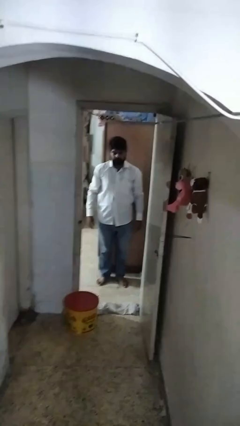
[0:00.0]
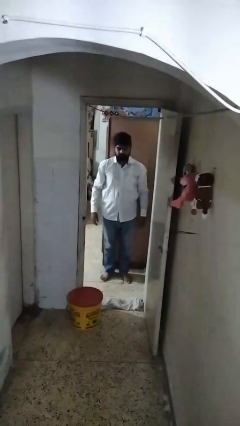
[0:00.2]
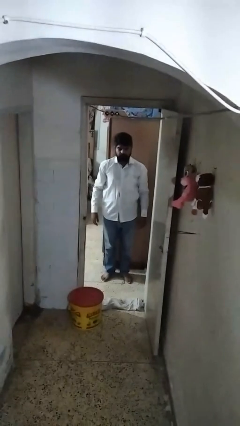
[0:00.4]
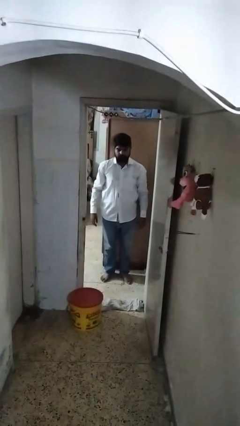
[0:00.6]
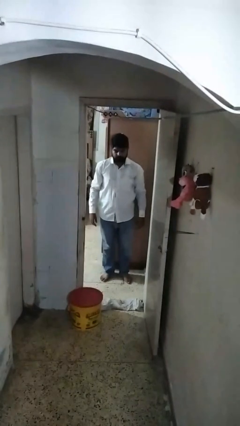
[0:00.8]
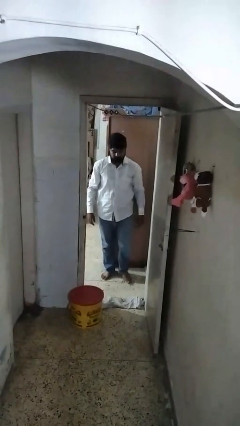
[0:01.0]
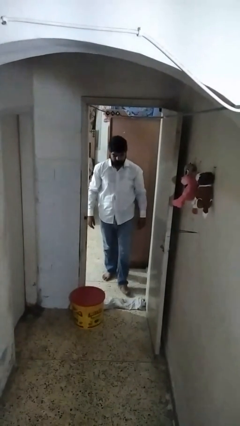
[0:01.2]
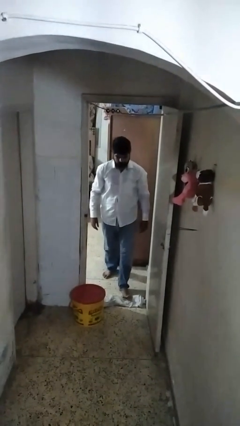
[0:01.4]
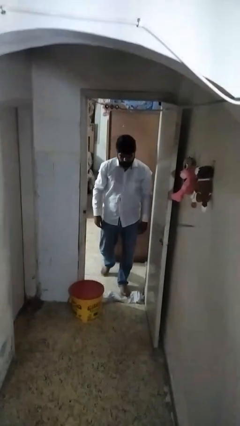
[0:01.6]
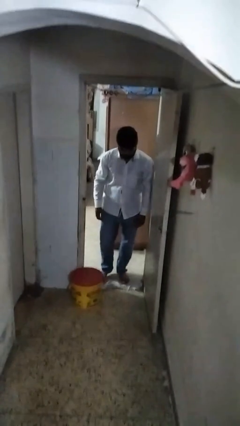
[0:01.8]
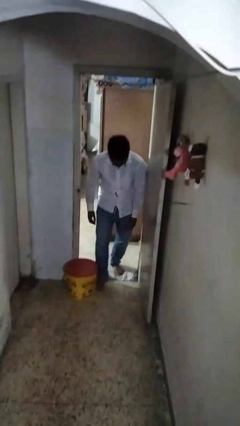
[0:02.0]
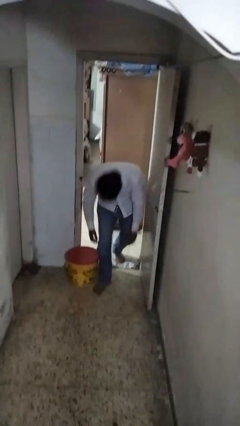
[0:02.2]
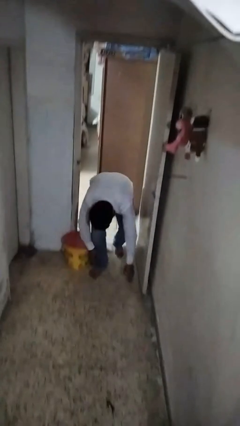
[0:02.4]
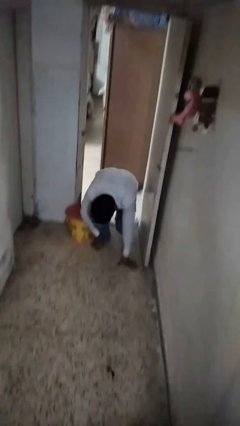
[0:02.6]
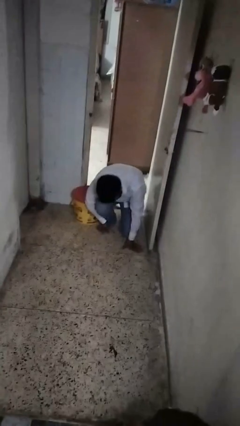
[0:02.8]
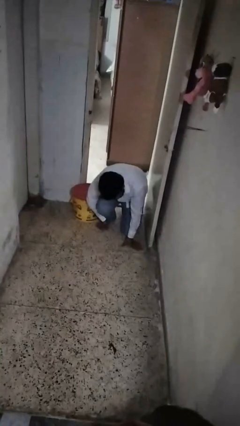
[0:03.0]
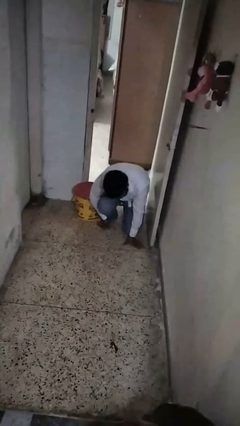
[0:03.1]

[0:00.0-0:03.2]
person trips on object on floor

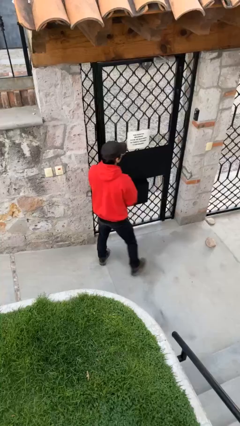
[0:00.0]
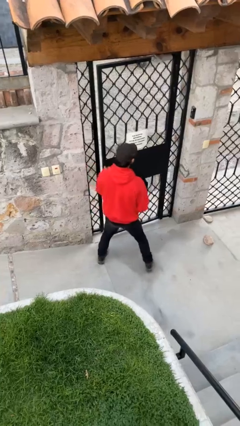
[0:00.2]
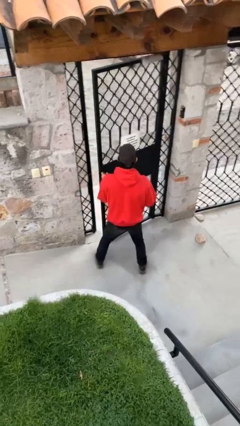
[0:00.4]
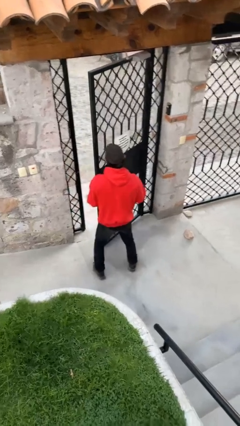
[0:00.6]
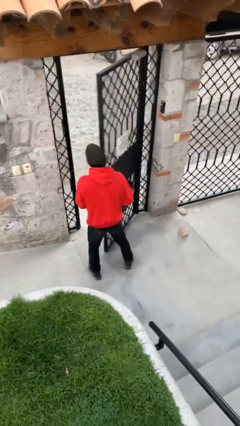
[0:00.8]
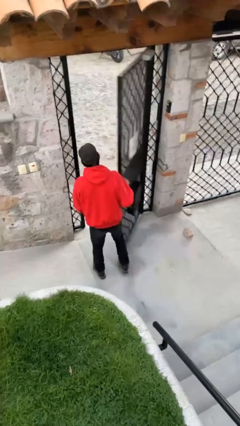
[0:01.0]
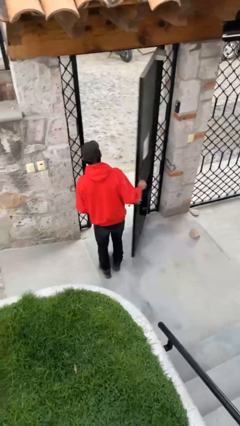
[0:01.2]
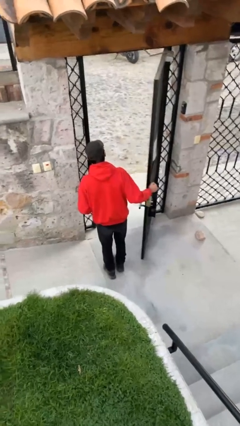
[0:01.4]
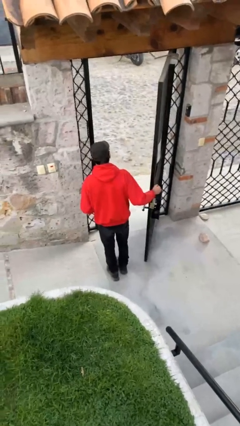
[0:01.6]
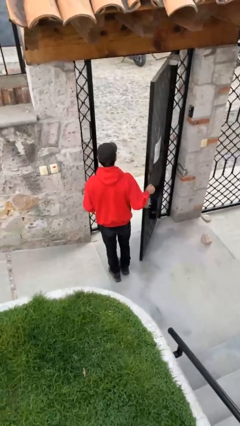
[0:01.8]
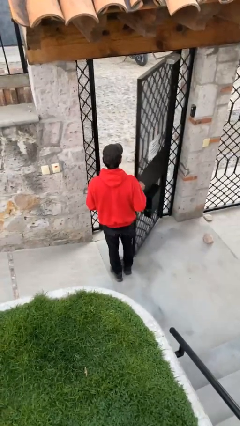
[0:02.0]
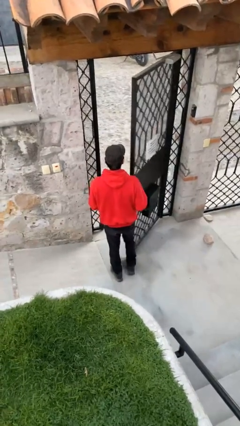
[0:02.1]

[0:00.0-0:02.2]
person opens facility door

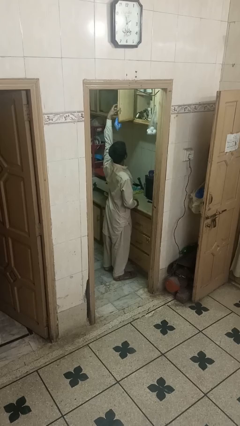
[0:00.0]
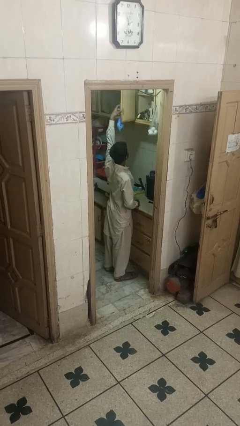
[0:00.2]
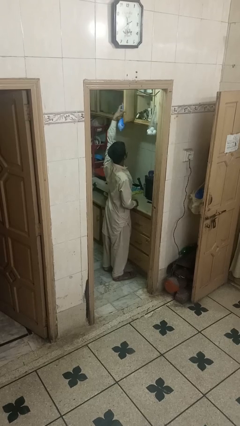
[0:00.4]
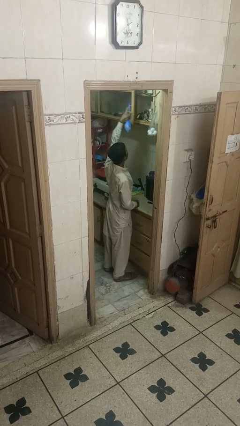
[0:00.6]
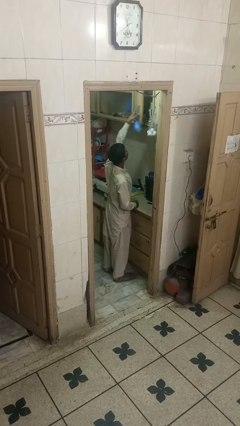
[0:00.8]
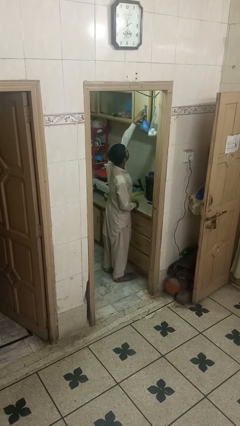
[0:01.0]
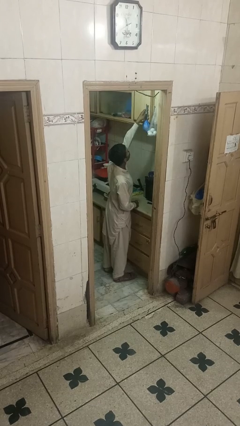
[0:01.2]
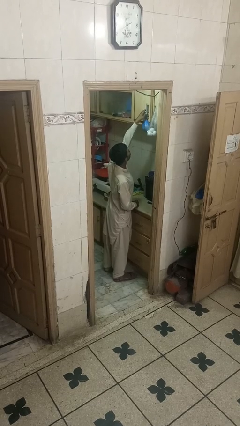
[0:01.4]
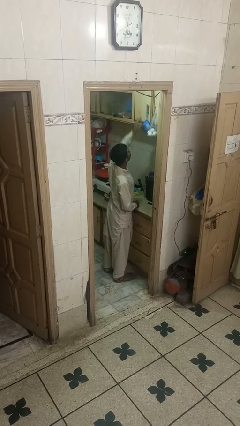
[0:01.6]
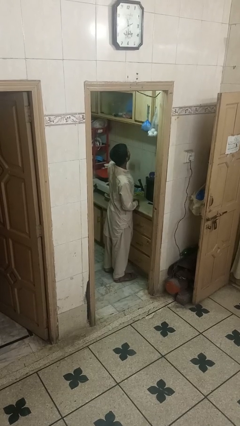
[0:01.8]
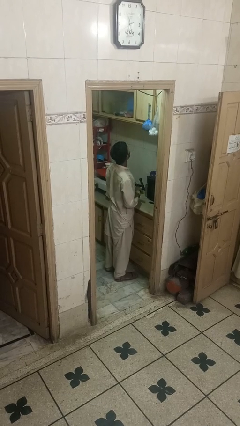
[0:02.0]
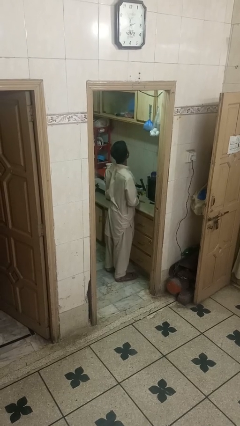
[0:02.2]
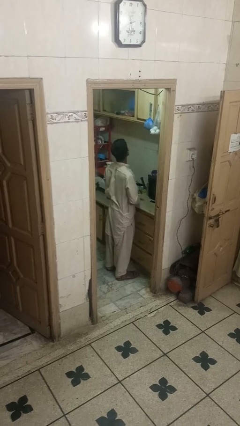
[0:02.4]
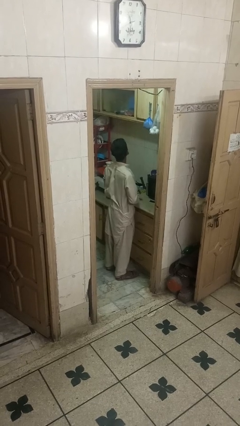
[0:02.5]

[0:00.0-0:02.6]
person closes cabinet

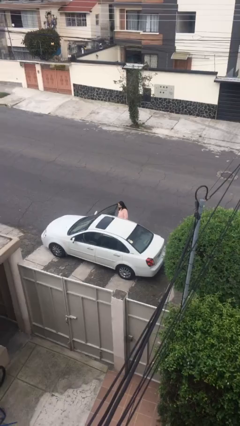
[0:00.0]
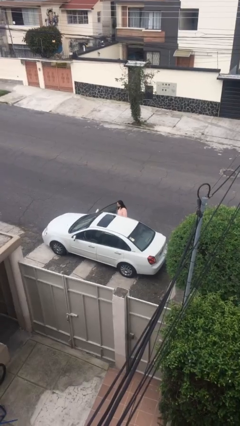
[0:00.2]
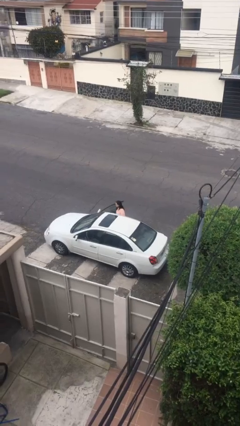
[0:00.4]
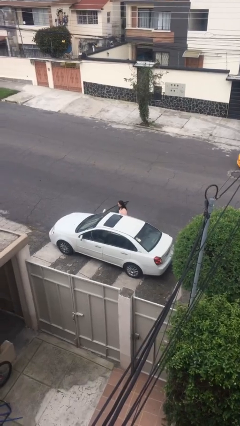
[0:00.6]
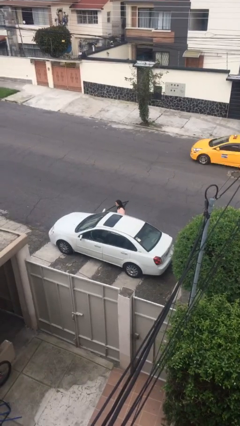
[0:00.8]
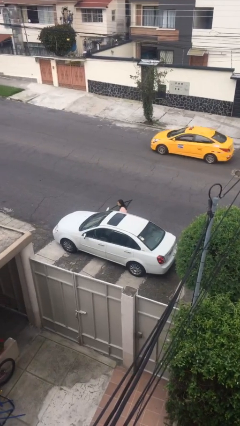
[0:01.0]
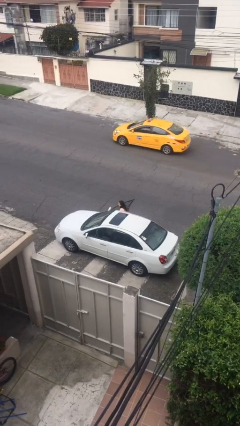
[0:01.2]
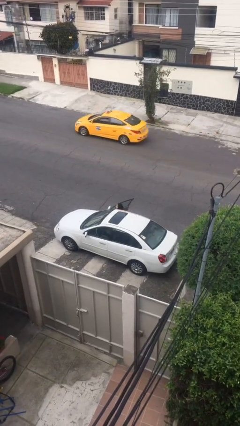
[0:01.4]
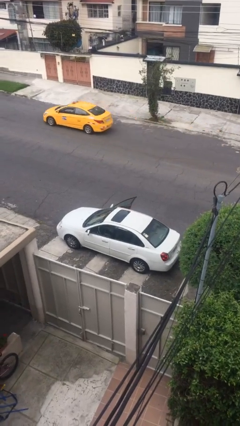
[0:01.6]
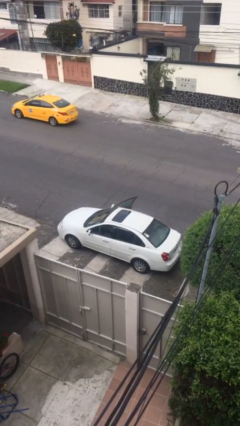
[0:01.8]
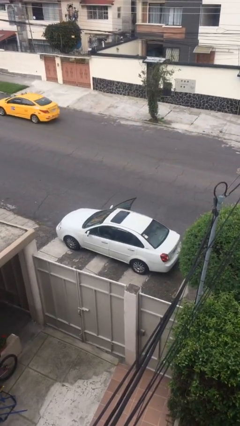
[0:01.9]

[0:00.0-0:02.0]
person enters car

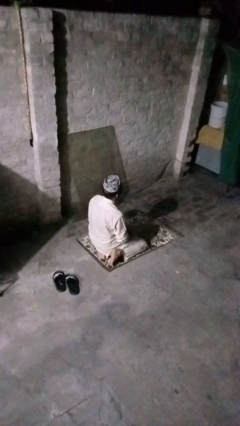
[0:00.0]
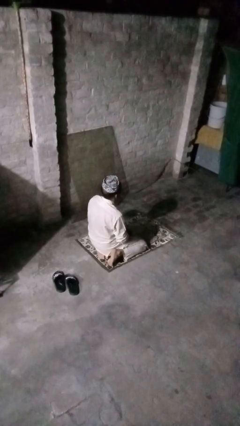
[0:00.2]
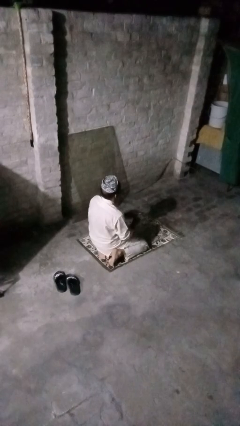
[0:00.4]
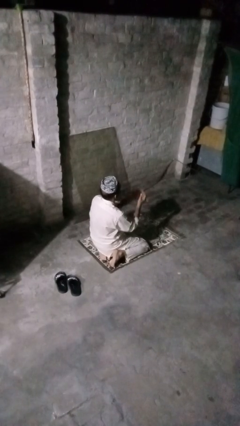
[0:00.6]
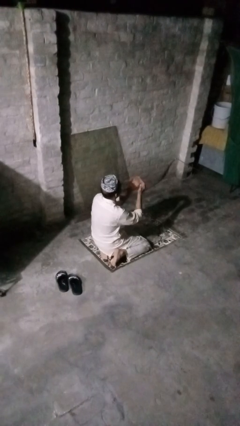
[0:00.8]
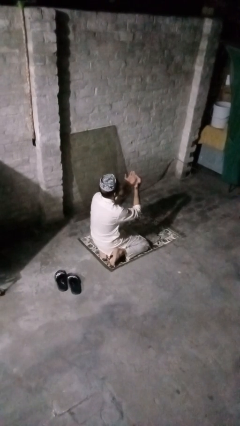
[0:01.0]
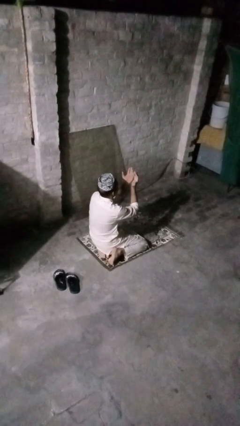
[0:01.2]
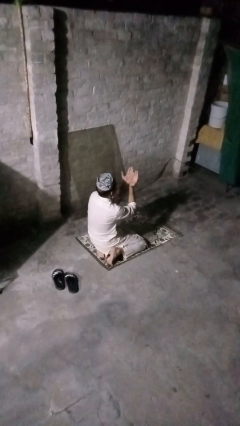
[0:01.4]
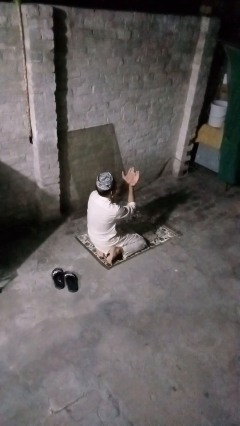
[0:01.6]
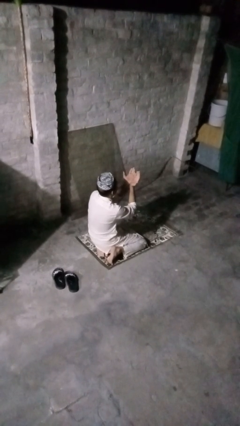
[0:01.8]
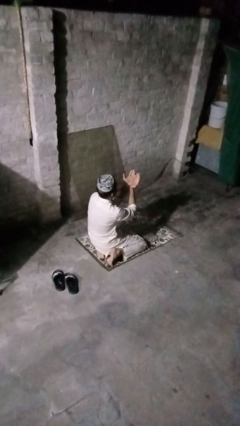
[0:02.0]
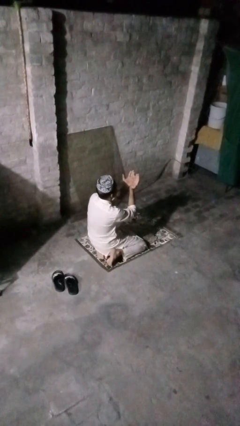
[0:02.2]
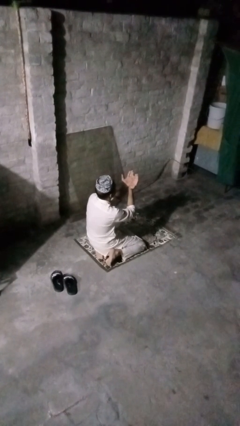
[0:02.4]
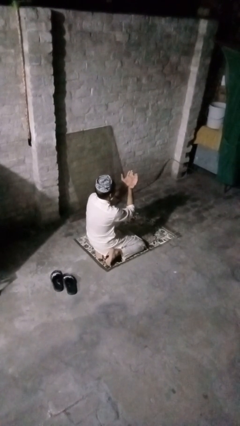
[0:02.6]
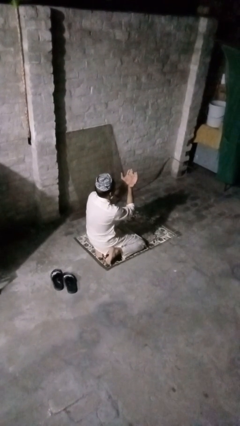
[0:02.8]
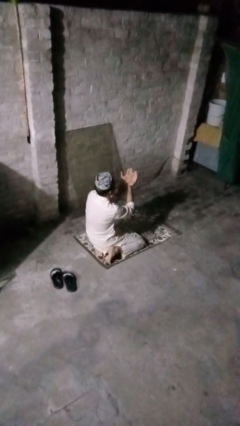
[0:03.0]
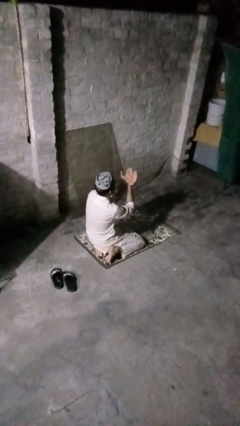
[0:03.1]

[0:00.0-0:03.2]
person prays

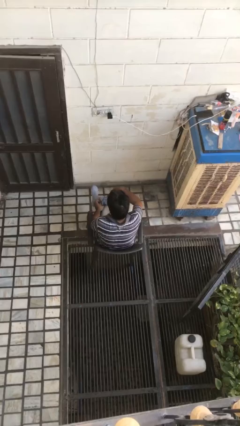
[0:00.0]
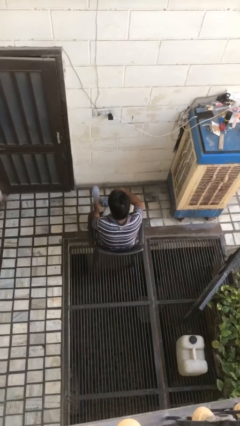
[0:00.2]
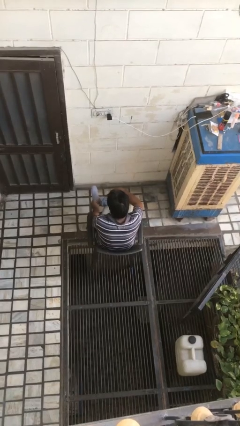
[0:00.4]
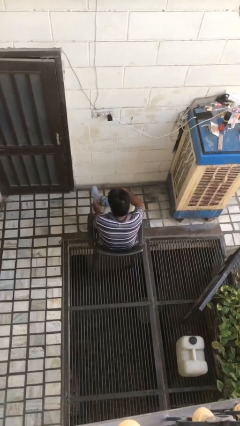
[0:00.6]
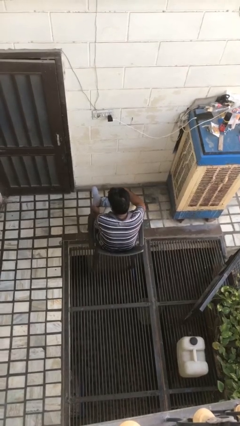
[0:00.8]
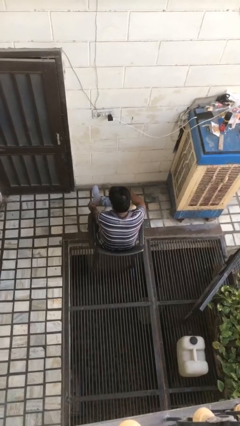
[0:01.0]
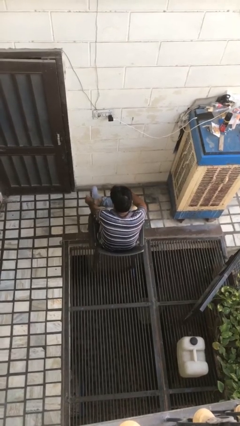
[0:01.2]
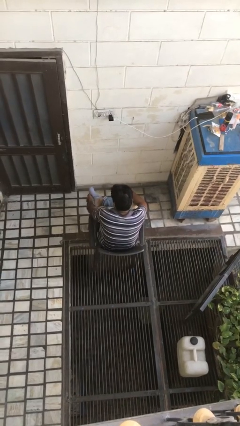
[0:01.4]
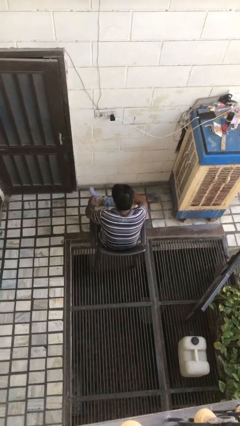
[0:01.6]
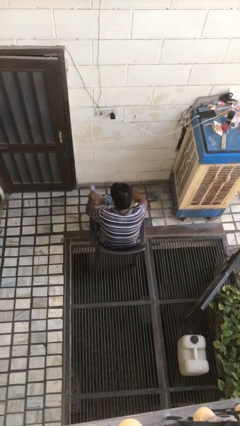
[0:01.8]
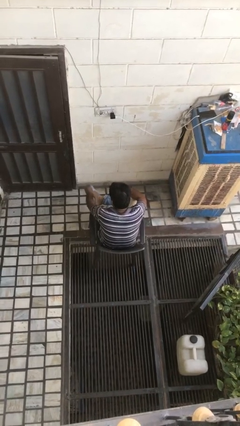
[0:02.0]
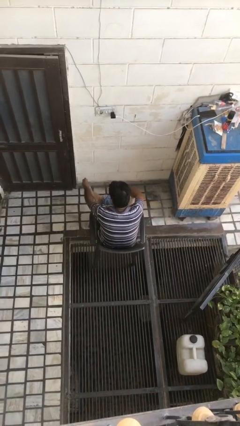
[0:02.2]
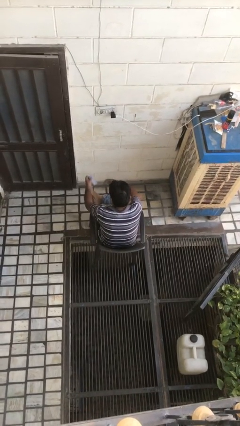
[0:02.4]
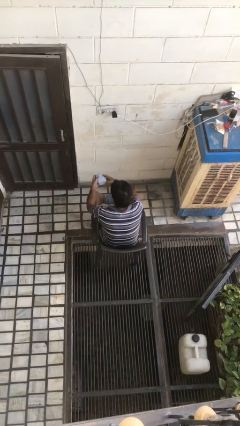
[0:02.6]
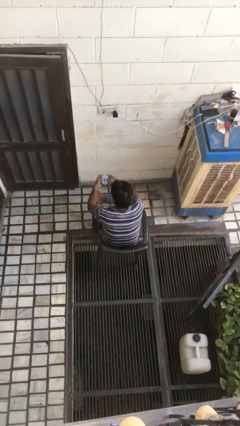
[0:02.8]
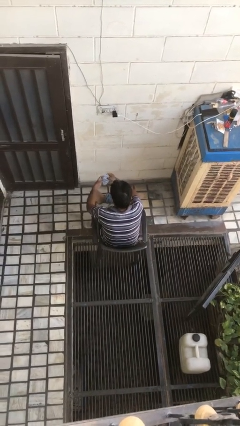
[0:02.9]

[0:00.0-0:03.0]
person takes off socks

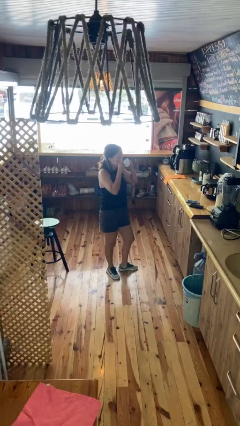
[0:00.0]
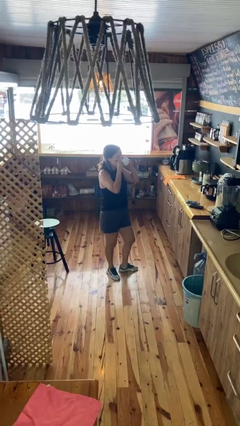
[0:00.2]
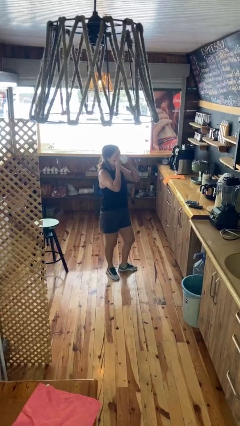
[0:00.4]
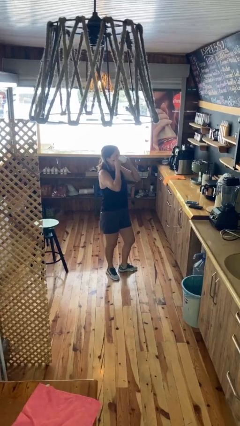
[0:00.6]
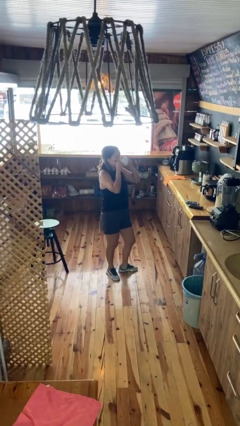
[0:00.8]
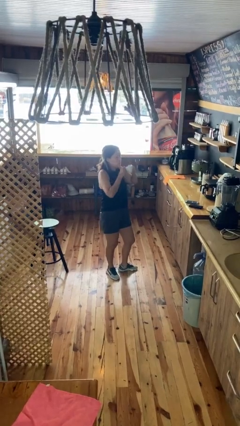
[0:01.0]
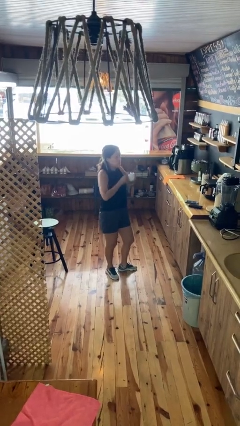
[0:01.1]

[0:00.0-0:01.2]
person drinks from mug
